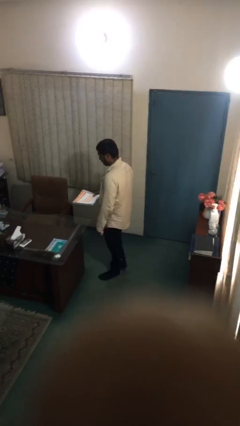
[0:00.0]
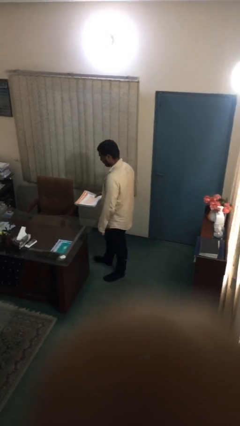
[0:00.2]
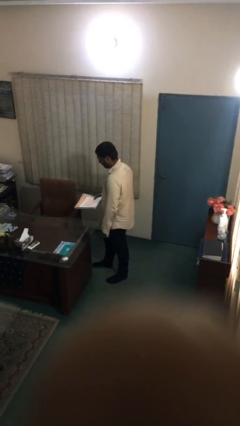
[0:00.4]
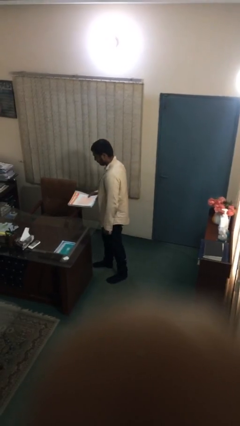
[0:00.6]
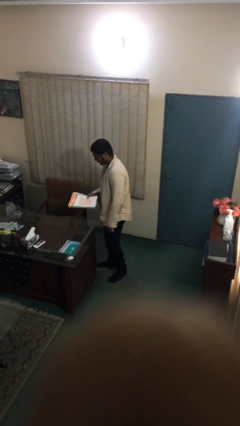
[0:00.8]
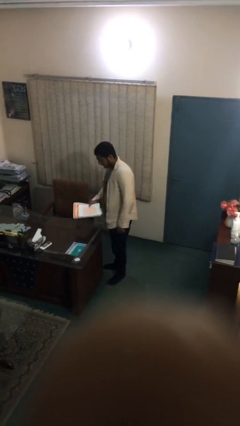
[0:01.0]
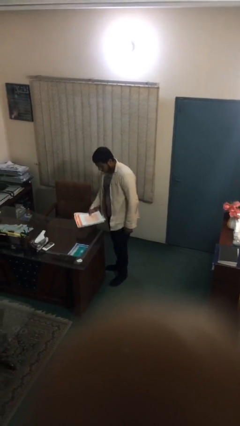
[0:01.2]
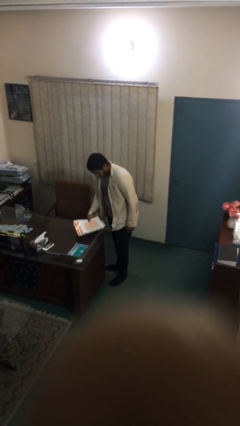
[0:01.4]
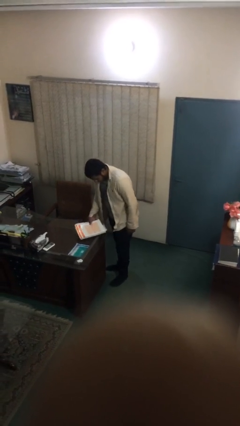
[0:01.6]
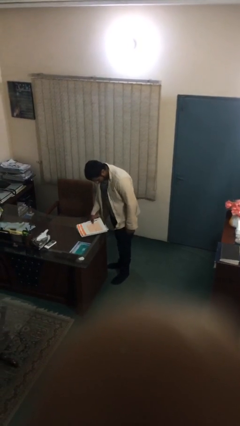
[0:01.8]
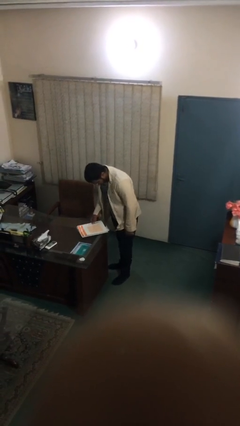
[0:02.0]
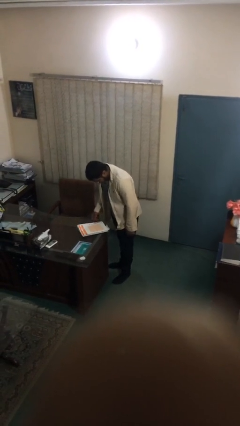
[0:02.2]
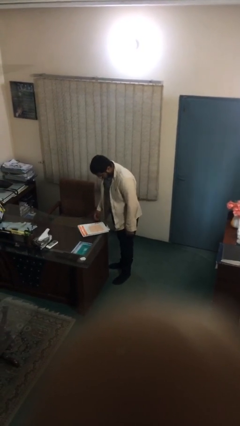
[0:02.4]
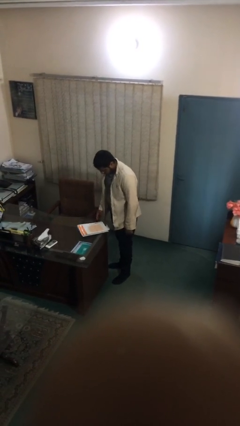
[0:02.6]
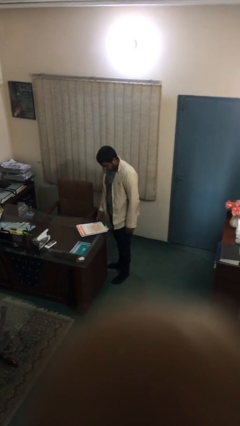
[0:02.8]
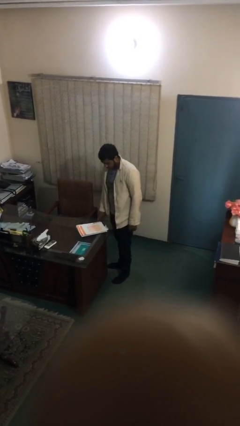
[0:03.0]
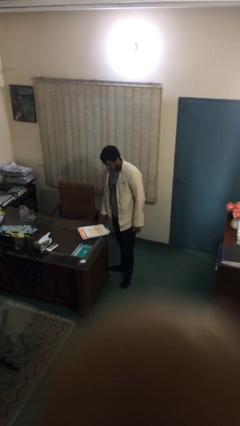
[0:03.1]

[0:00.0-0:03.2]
person puts down object on table

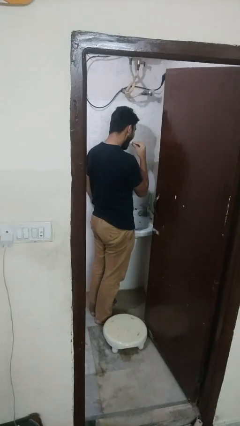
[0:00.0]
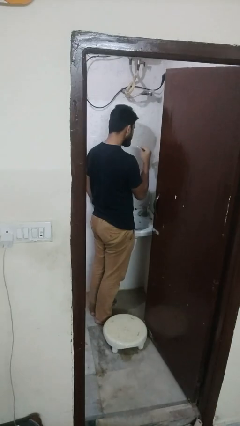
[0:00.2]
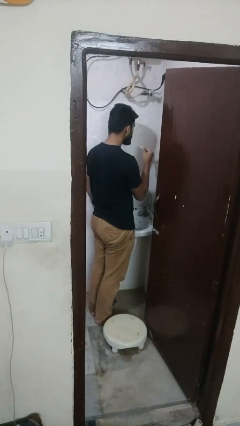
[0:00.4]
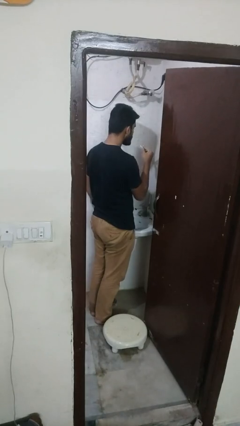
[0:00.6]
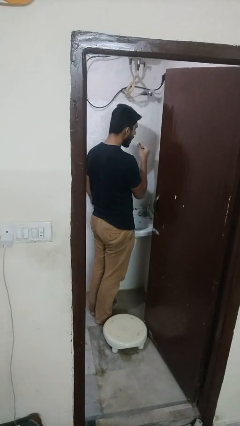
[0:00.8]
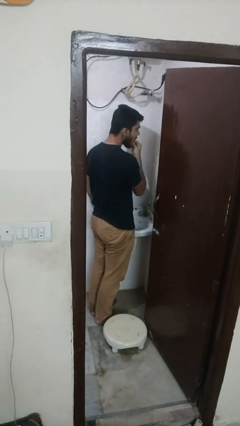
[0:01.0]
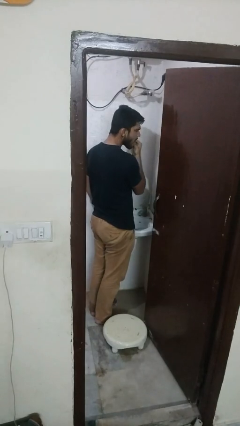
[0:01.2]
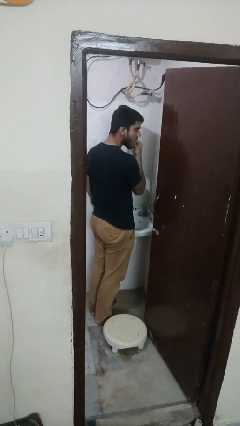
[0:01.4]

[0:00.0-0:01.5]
person flosses

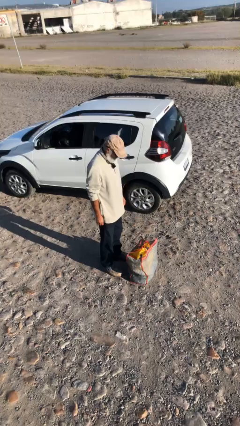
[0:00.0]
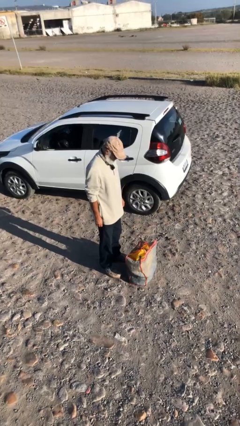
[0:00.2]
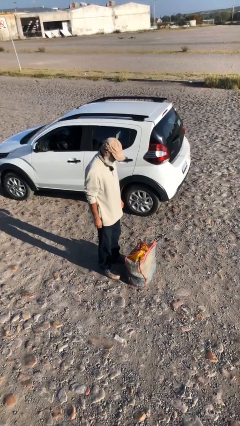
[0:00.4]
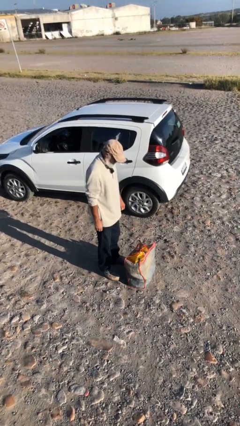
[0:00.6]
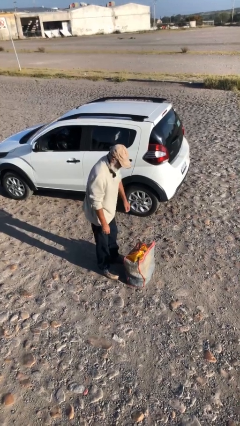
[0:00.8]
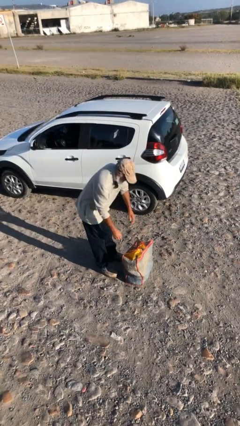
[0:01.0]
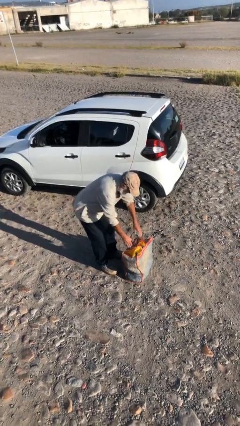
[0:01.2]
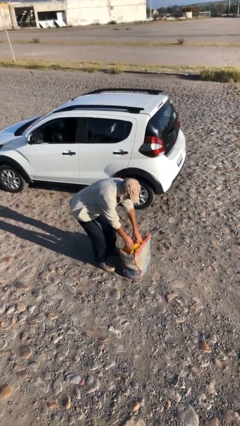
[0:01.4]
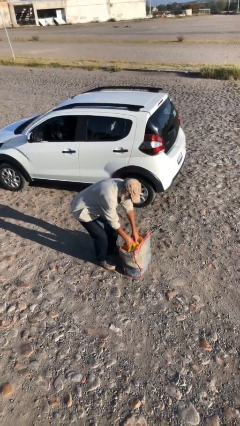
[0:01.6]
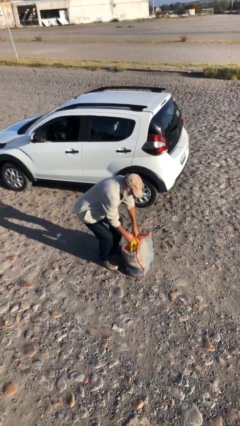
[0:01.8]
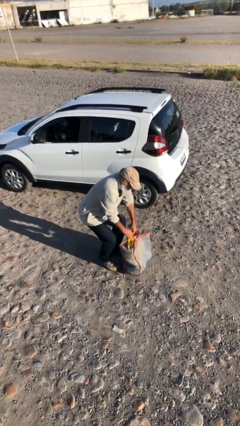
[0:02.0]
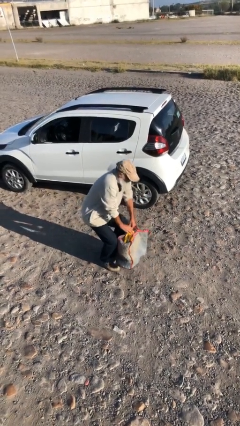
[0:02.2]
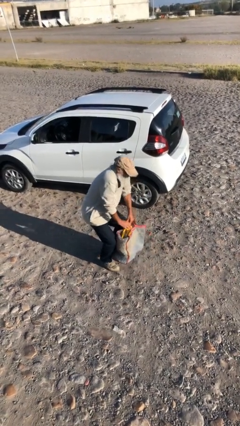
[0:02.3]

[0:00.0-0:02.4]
person picks up object from floor

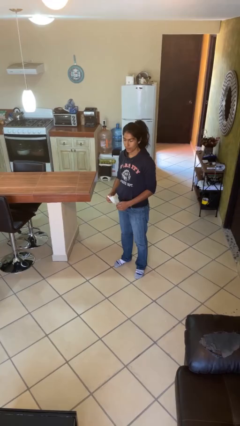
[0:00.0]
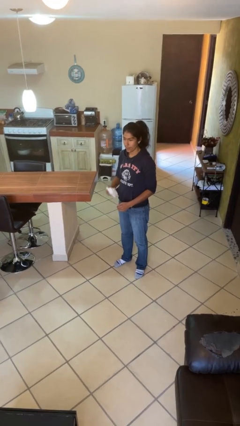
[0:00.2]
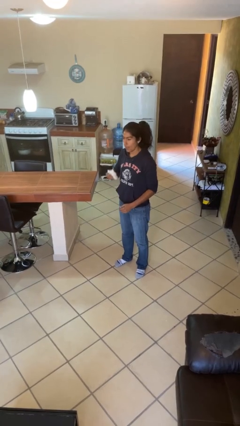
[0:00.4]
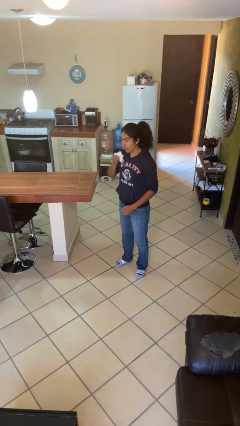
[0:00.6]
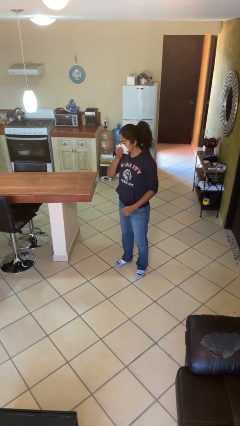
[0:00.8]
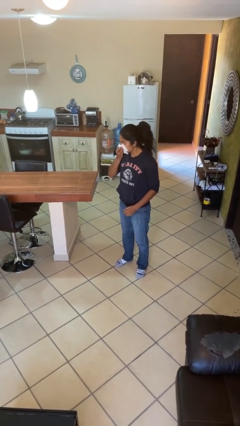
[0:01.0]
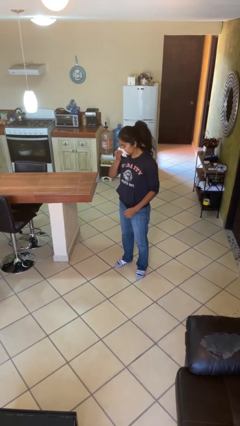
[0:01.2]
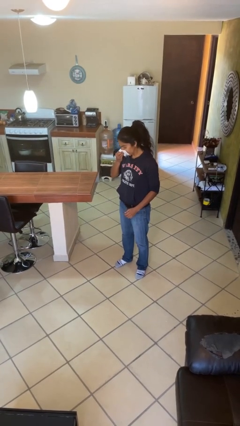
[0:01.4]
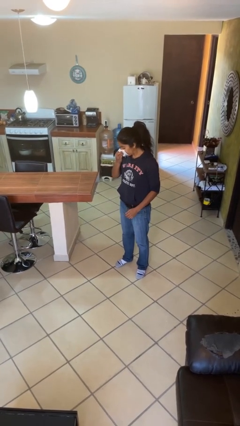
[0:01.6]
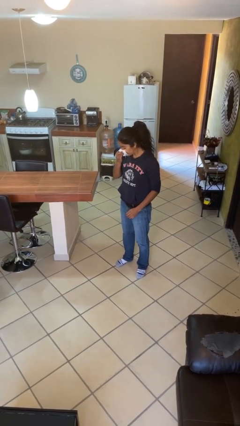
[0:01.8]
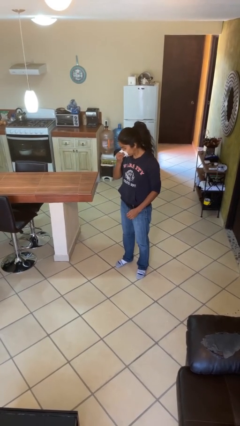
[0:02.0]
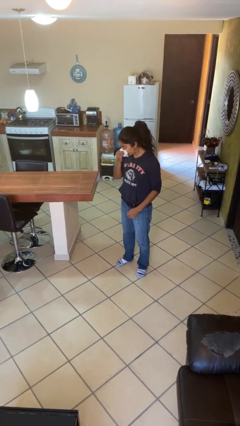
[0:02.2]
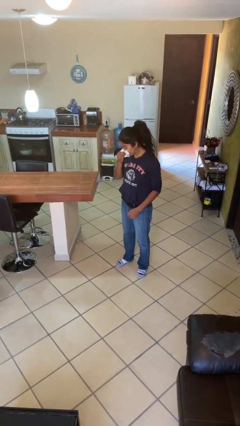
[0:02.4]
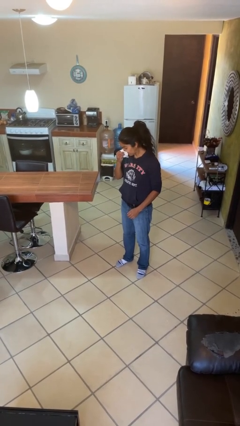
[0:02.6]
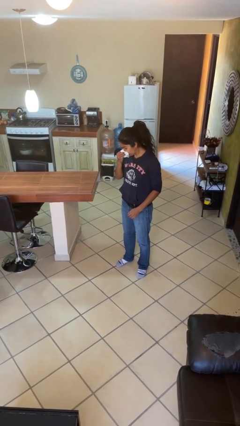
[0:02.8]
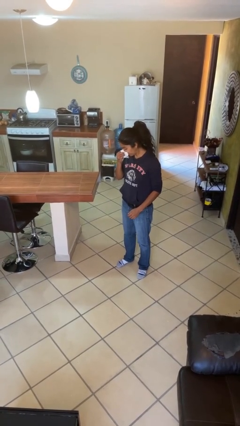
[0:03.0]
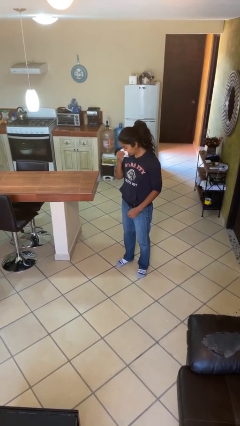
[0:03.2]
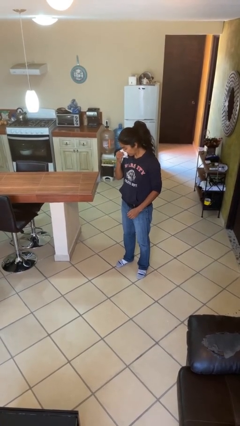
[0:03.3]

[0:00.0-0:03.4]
person blows nose

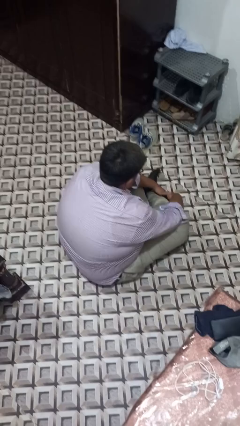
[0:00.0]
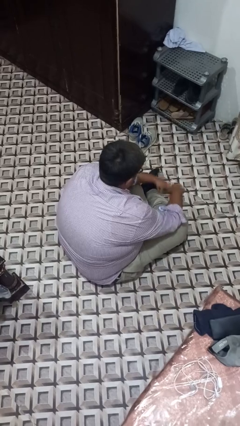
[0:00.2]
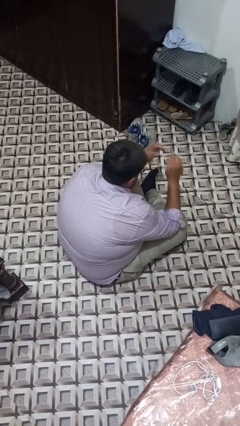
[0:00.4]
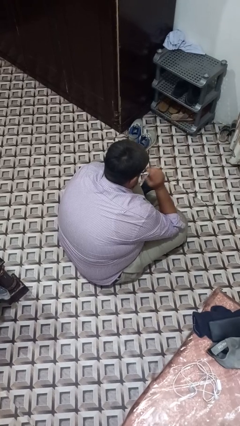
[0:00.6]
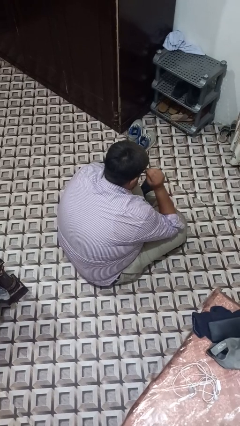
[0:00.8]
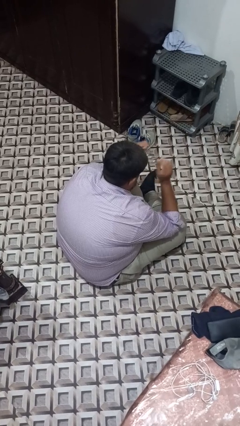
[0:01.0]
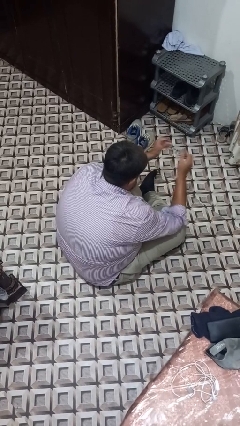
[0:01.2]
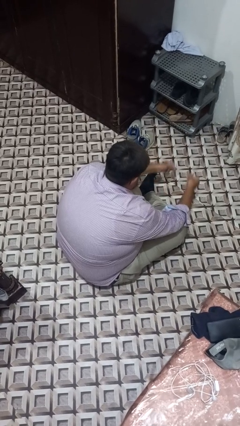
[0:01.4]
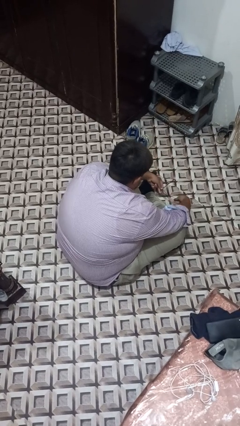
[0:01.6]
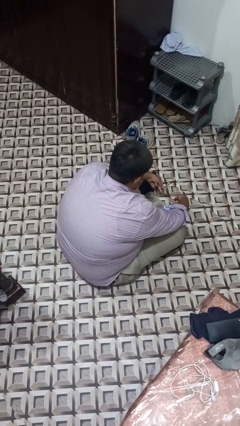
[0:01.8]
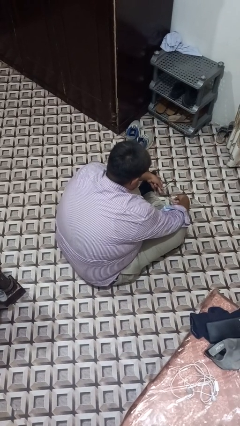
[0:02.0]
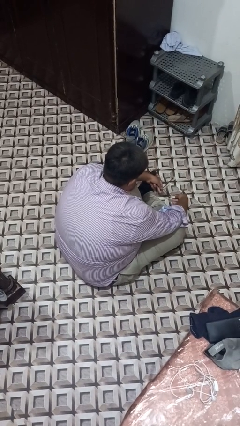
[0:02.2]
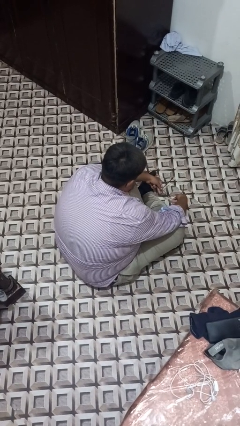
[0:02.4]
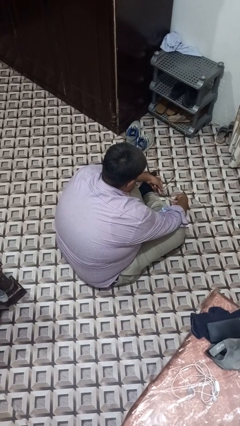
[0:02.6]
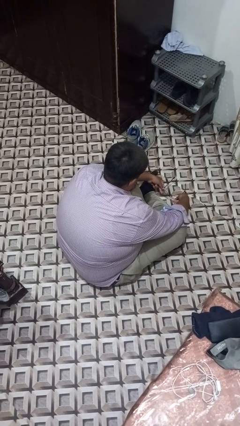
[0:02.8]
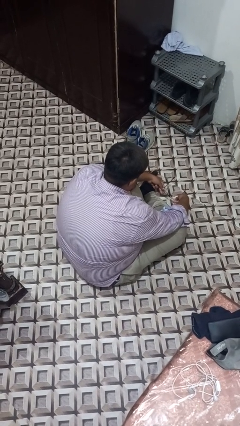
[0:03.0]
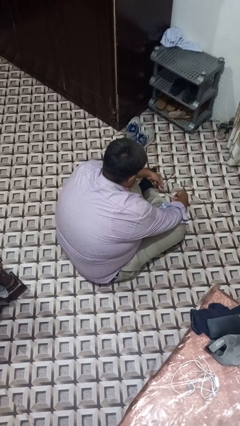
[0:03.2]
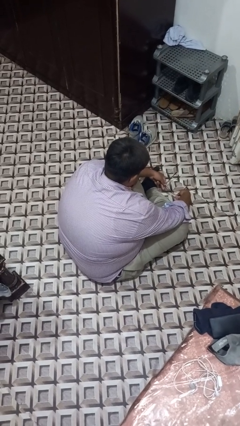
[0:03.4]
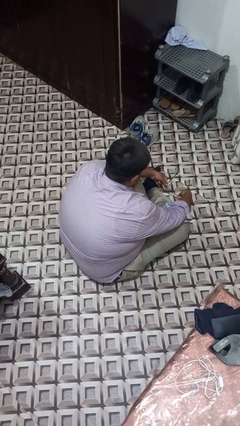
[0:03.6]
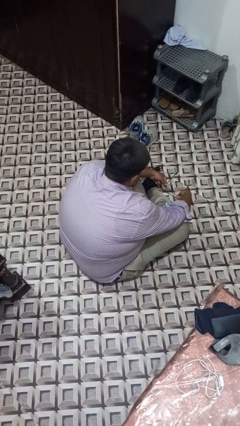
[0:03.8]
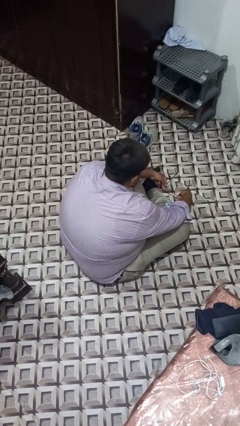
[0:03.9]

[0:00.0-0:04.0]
person takes off glasses

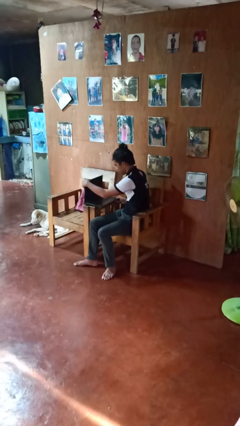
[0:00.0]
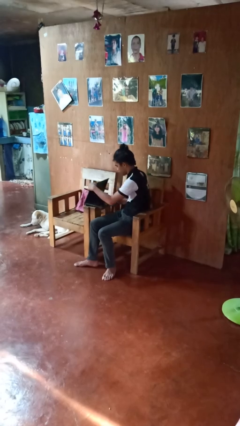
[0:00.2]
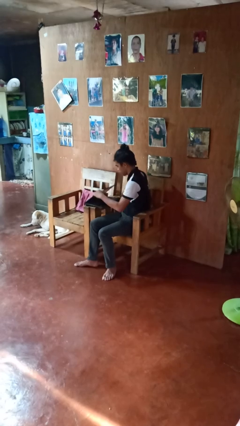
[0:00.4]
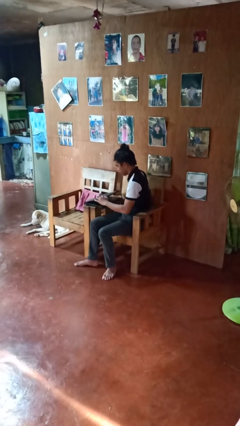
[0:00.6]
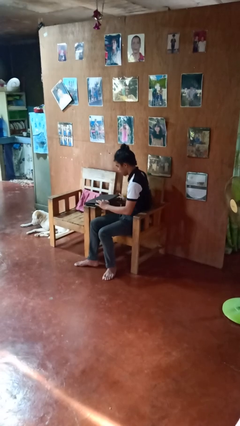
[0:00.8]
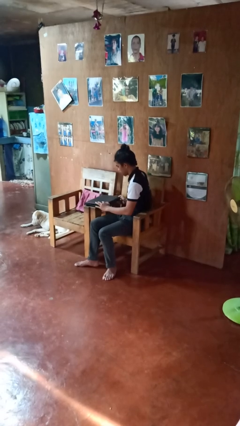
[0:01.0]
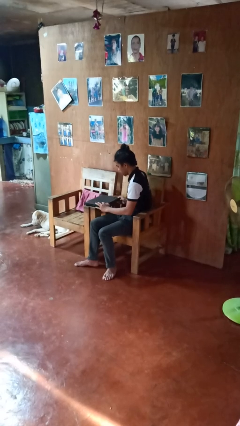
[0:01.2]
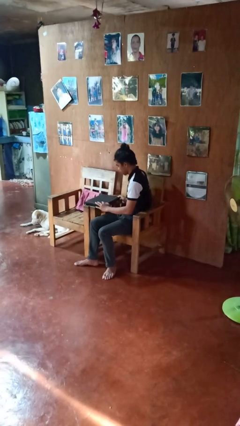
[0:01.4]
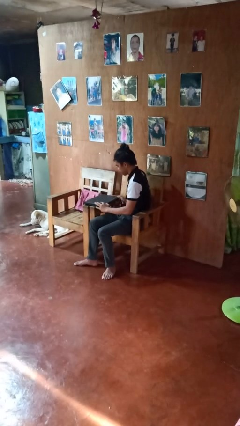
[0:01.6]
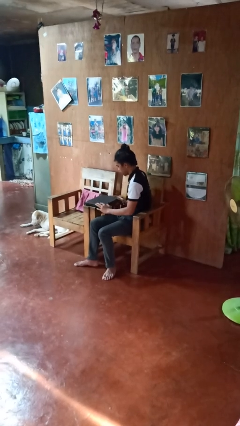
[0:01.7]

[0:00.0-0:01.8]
person closes laptop

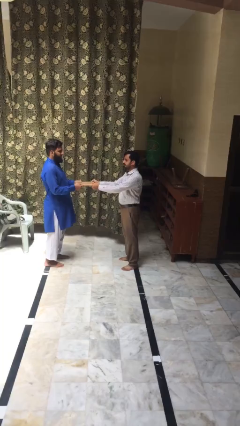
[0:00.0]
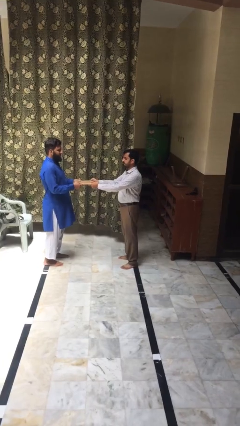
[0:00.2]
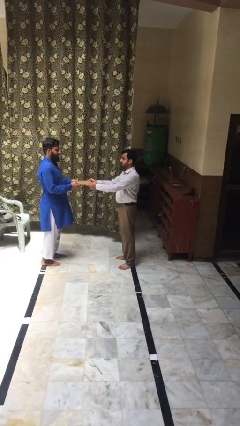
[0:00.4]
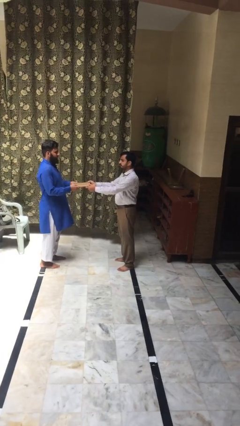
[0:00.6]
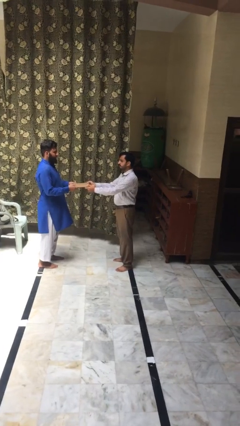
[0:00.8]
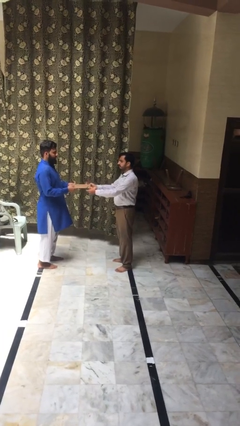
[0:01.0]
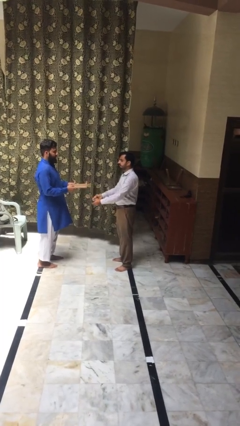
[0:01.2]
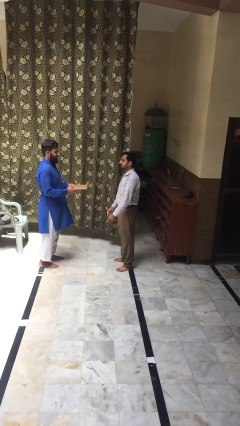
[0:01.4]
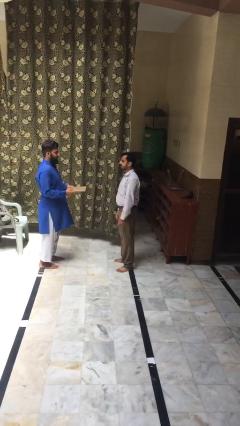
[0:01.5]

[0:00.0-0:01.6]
person transfers object to person
